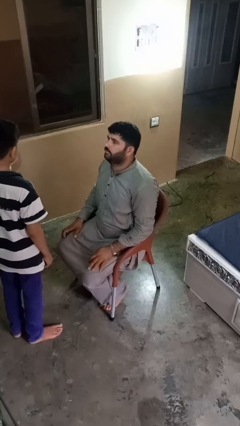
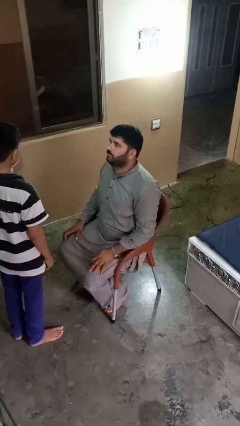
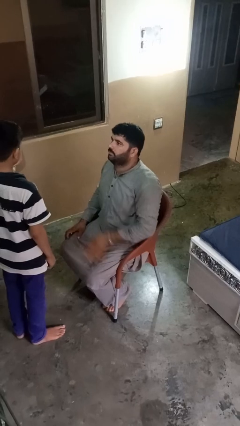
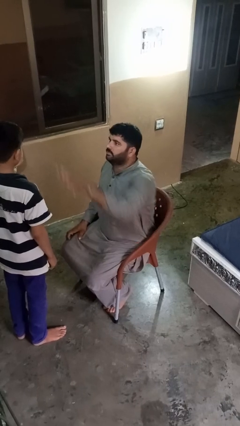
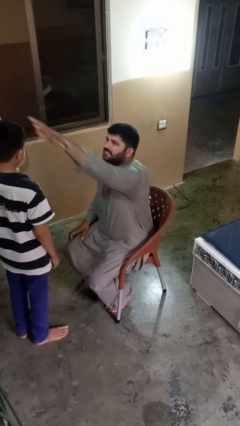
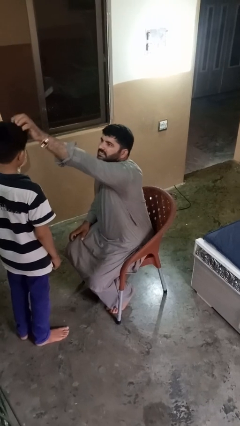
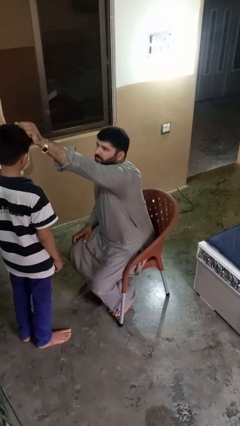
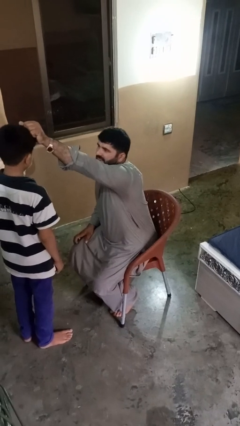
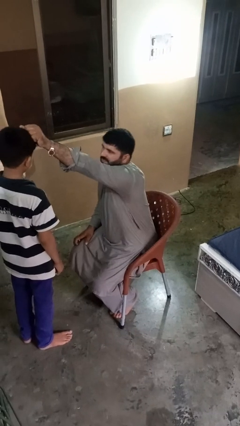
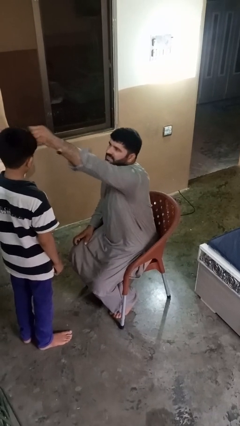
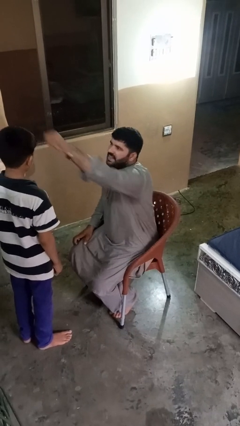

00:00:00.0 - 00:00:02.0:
person braids hair of person

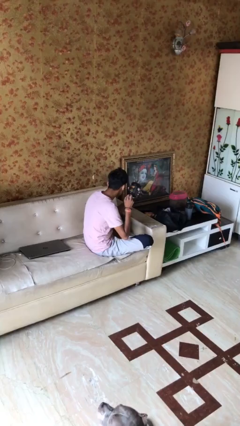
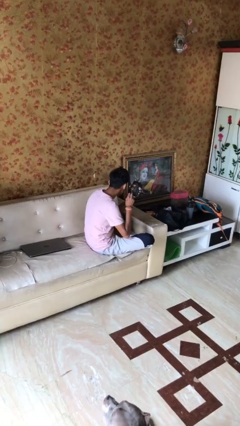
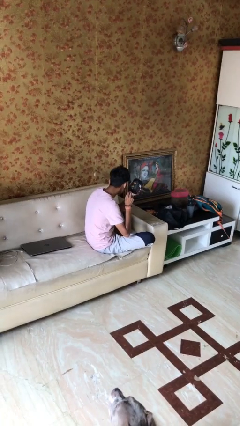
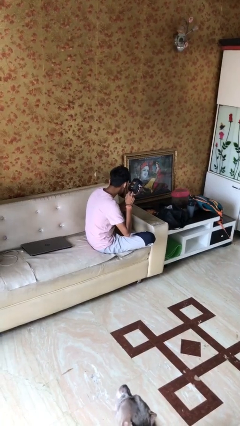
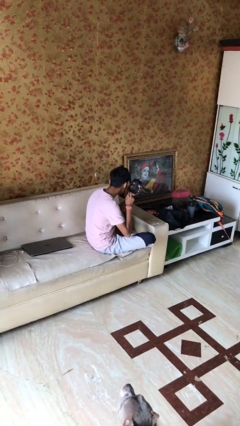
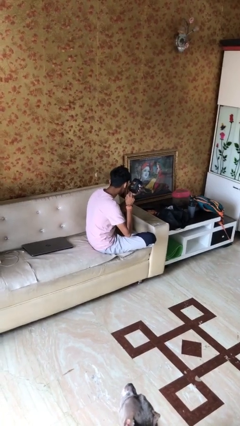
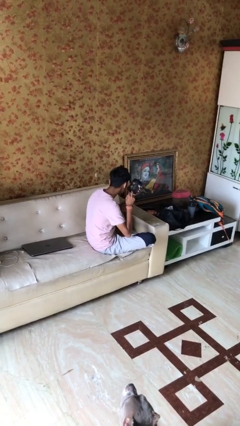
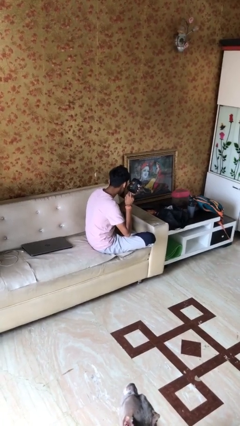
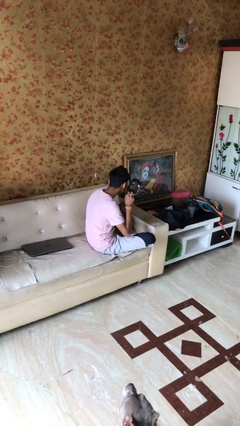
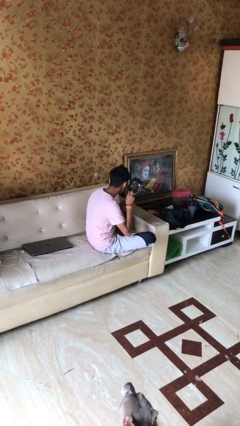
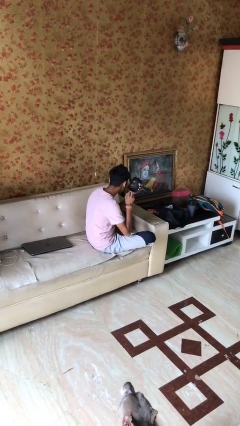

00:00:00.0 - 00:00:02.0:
person taps object with finger

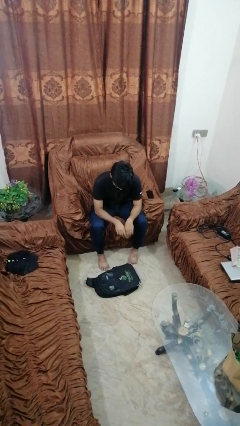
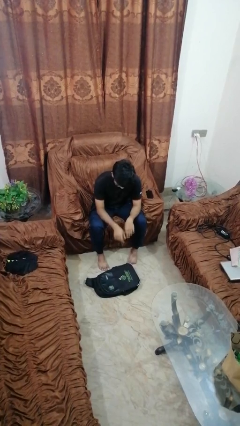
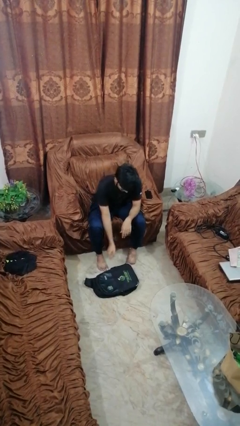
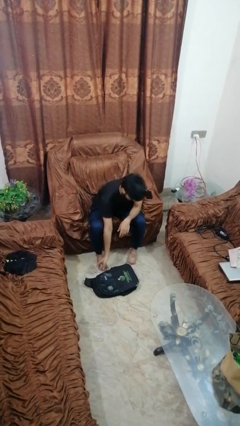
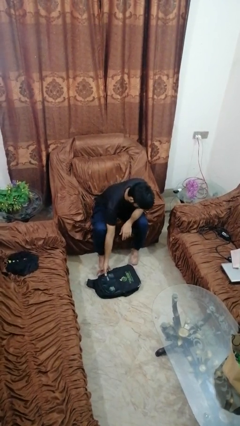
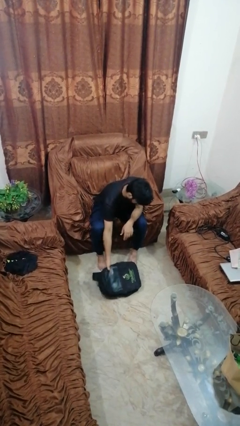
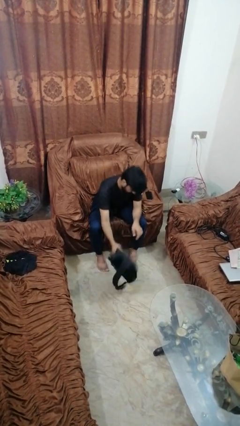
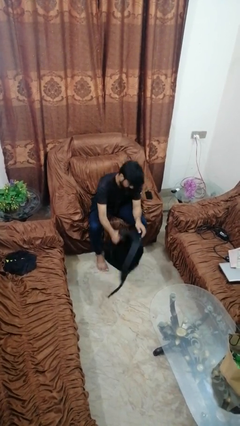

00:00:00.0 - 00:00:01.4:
person picks up object from floor

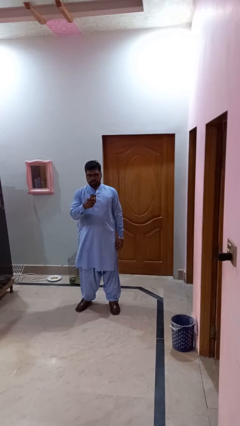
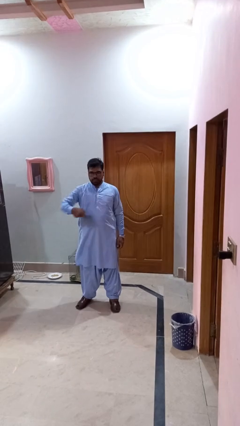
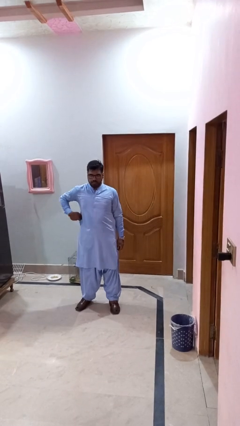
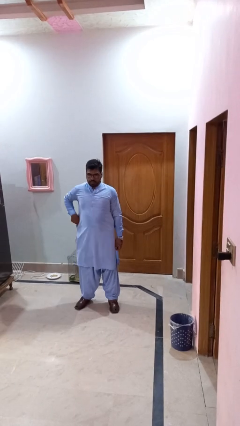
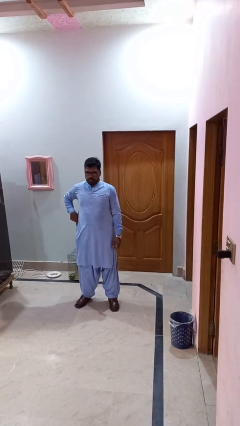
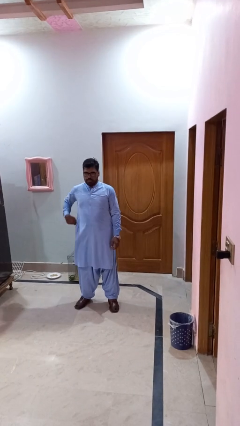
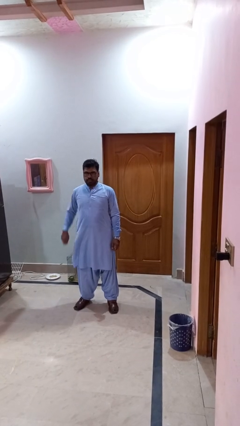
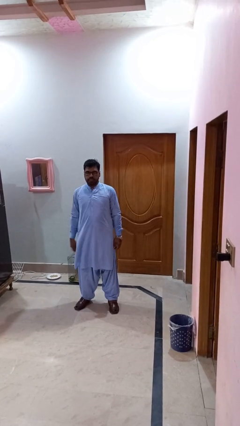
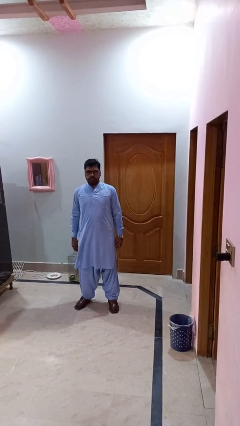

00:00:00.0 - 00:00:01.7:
person puts phone into pocket

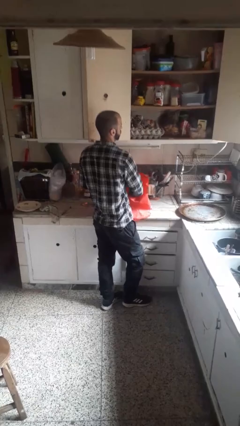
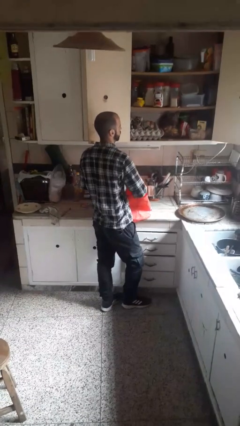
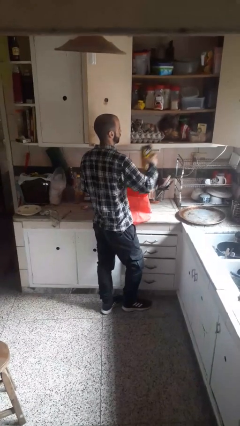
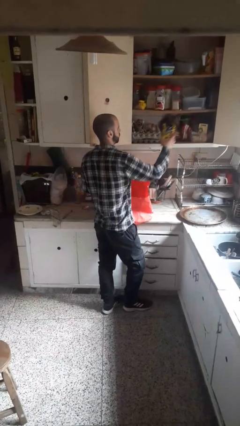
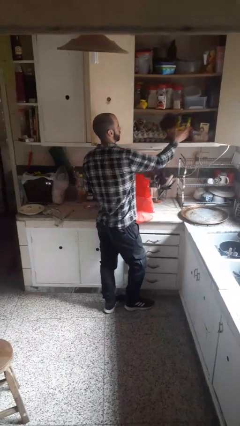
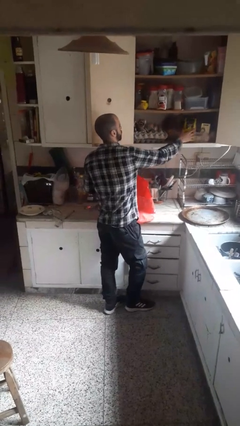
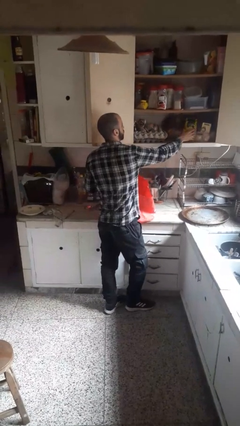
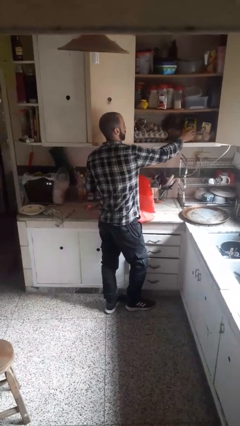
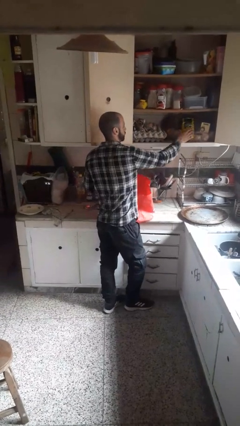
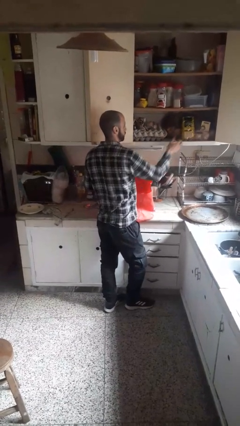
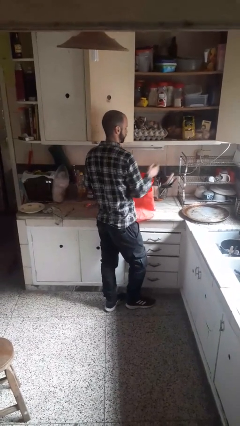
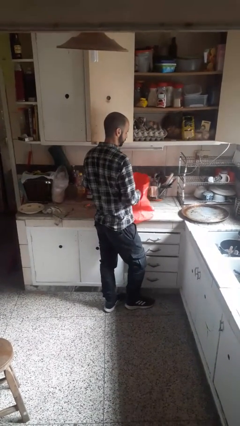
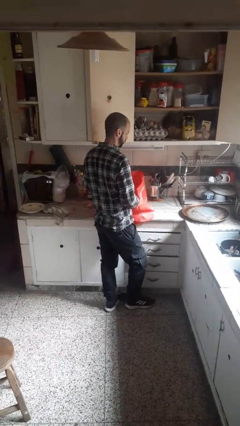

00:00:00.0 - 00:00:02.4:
person loads groceries into cabinet

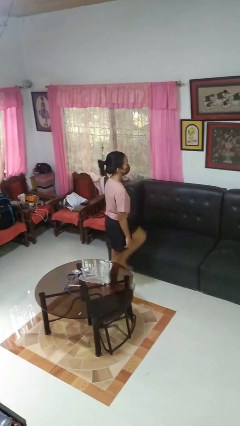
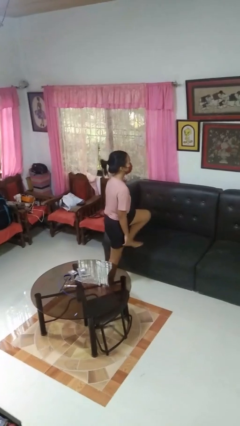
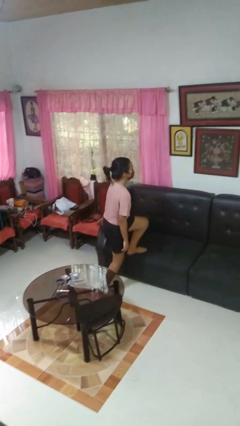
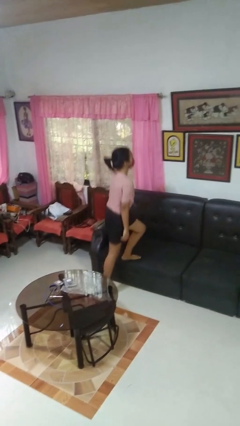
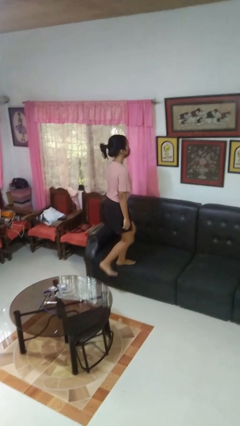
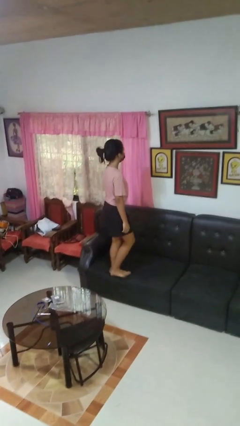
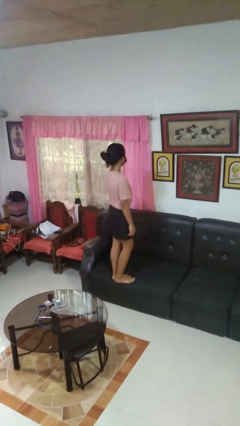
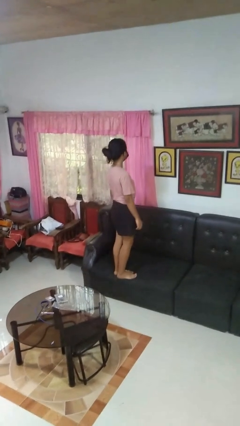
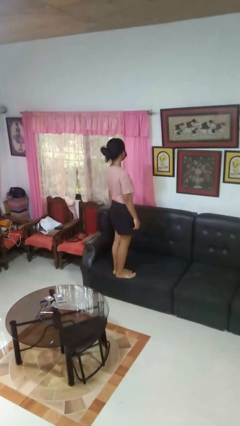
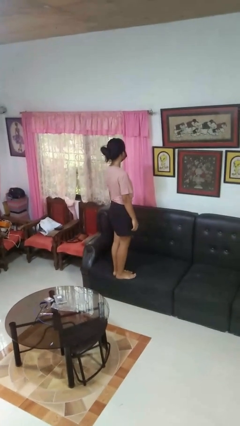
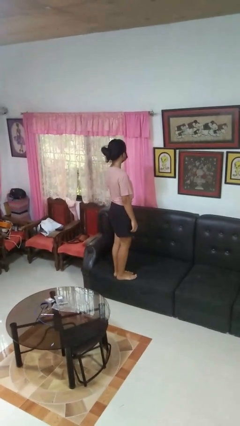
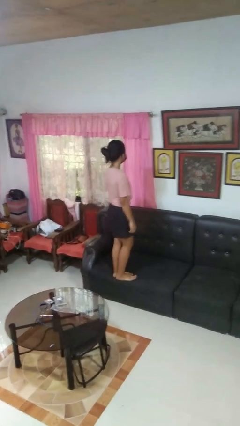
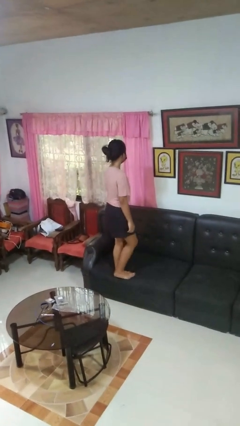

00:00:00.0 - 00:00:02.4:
person climbs on couch

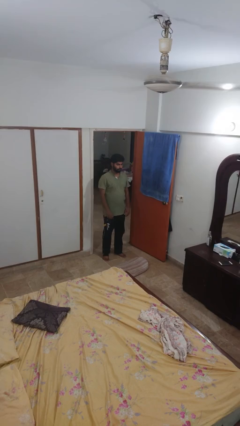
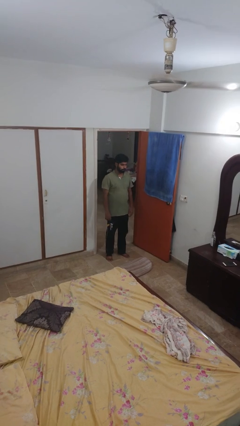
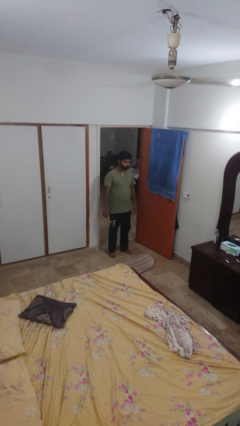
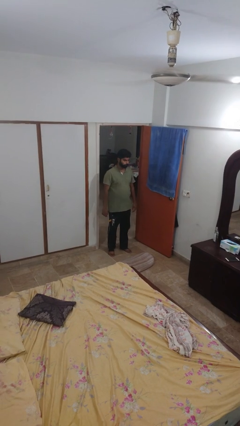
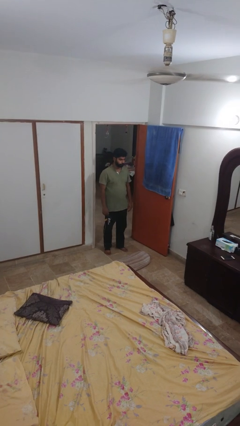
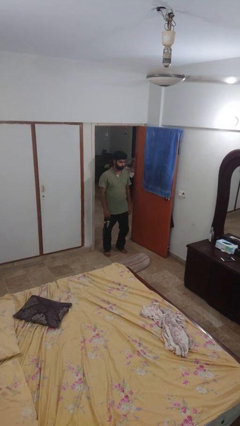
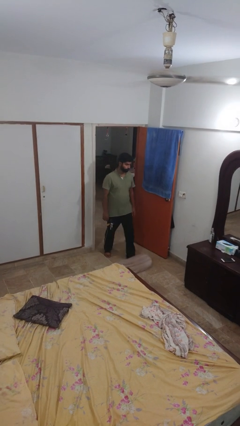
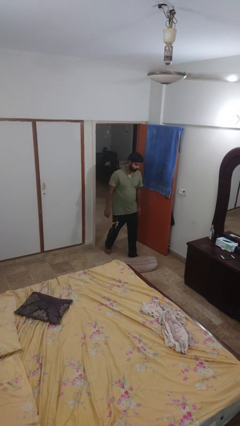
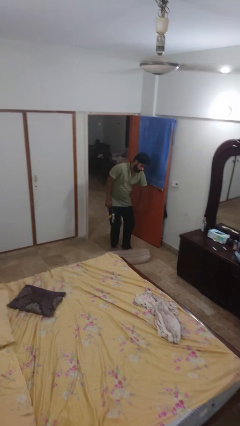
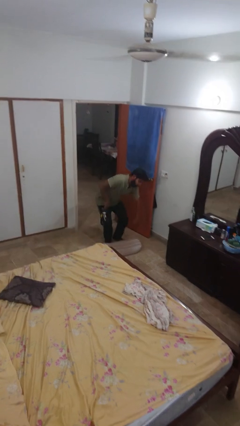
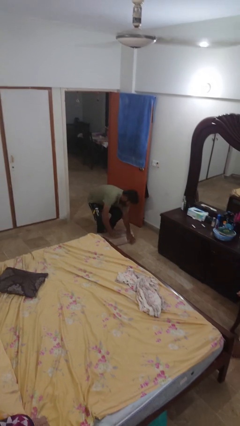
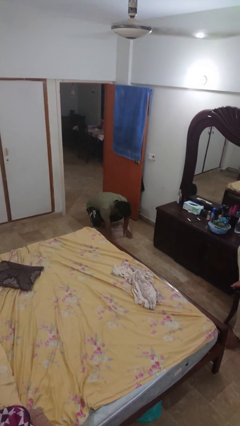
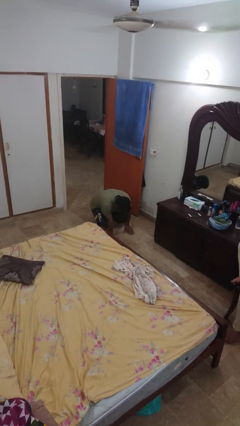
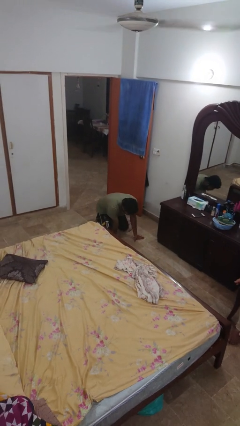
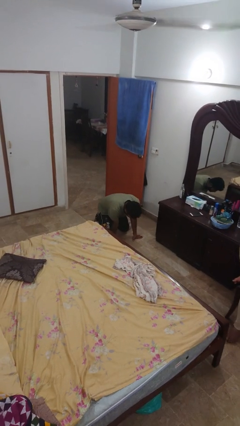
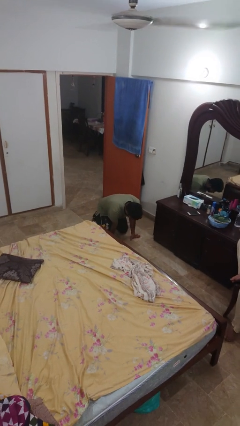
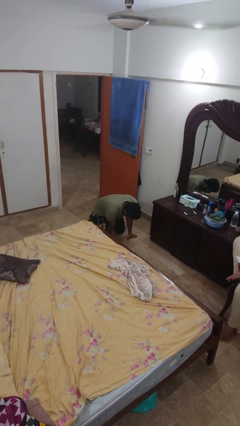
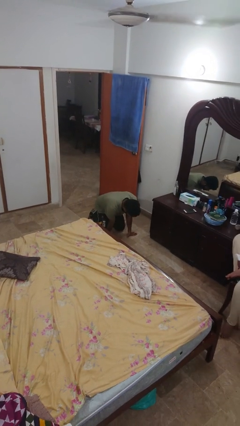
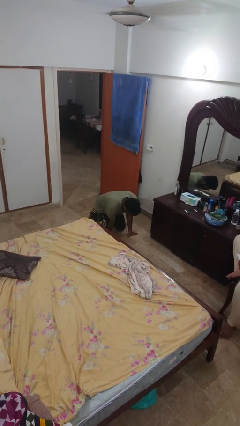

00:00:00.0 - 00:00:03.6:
person trips on object on floor

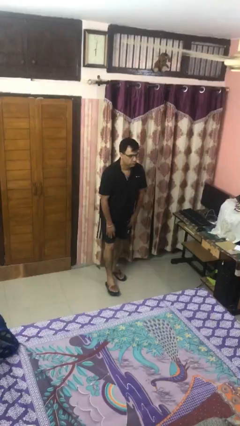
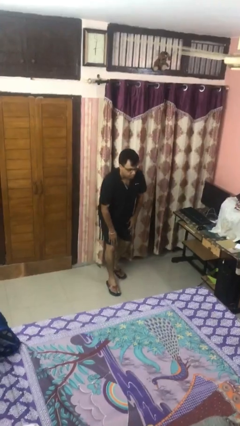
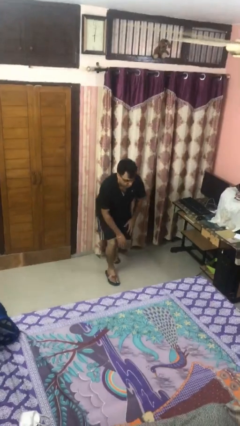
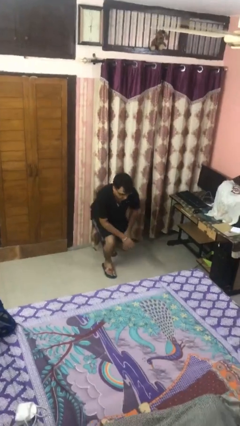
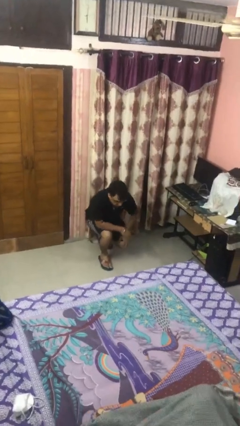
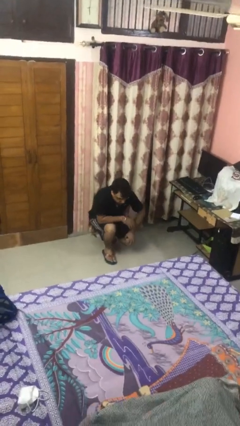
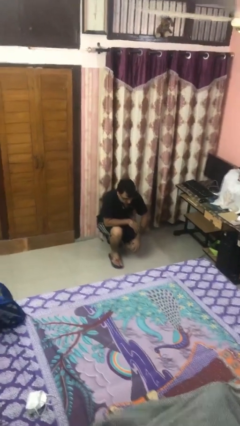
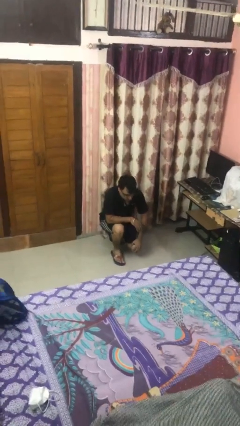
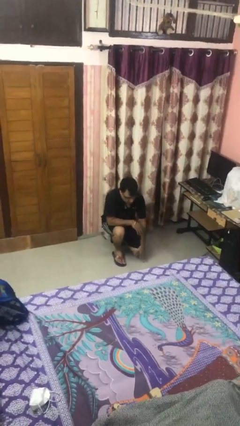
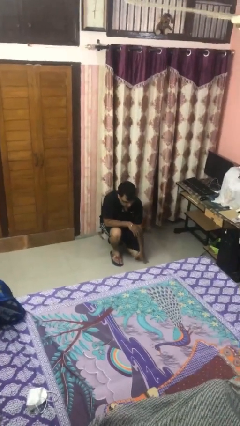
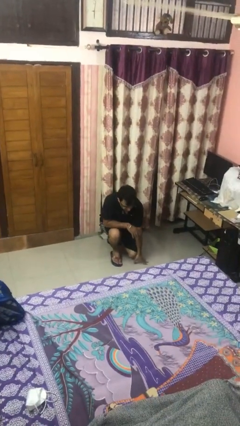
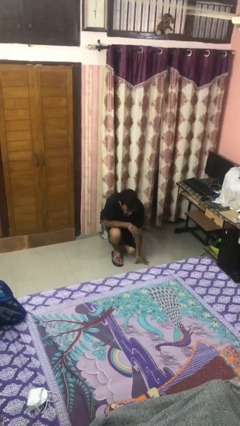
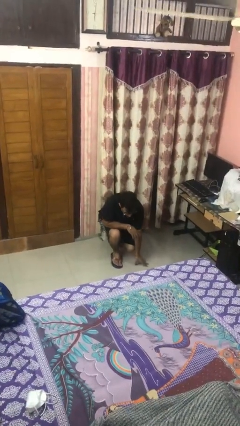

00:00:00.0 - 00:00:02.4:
person kneels
